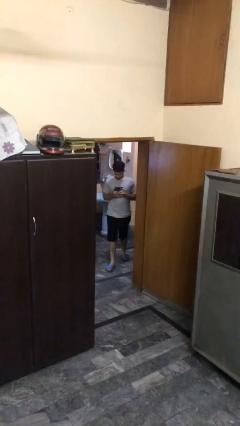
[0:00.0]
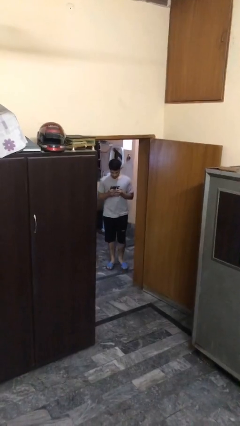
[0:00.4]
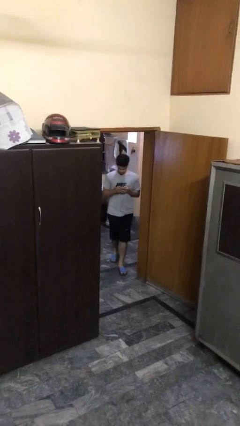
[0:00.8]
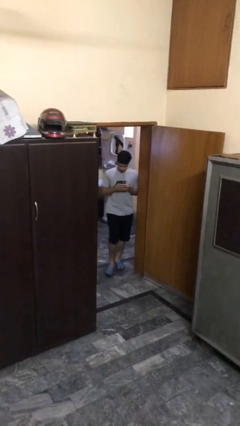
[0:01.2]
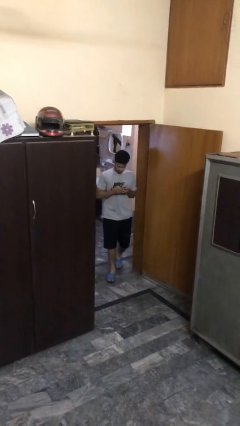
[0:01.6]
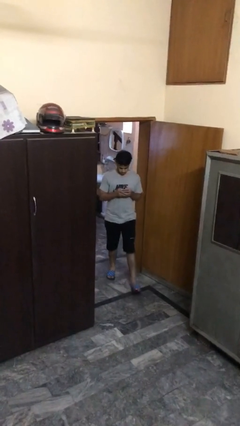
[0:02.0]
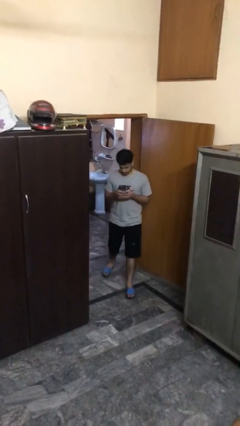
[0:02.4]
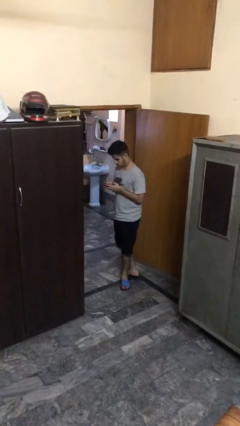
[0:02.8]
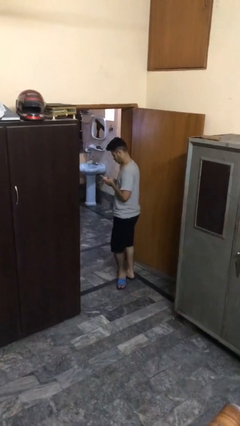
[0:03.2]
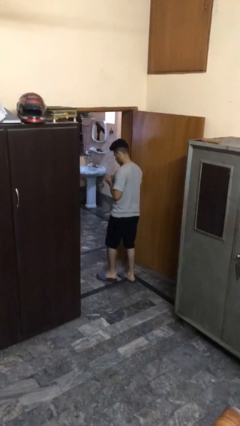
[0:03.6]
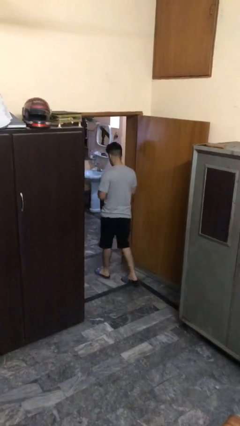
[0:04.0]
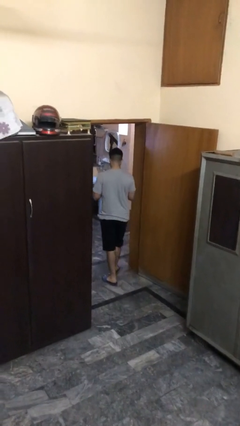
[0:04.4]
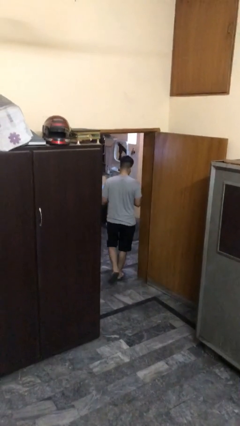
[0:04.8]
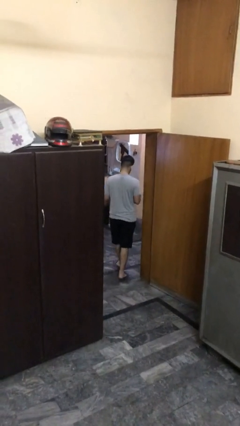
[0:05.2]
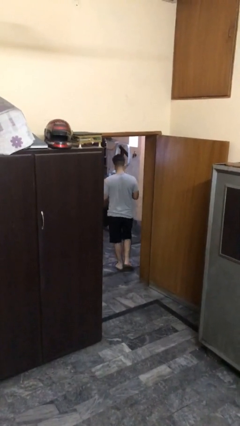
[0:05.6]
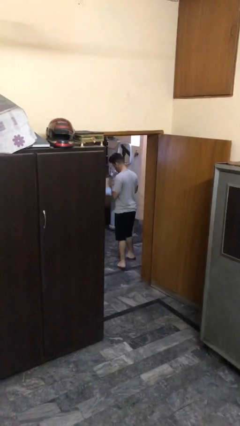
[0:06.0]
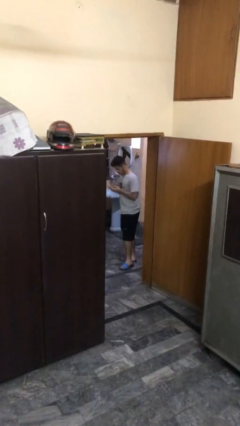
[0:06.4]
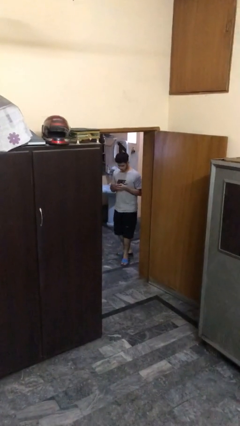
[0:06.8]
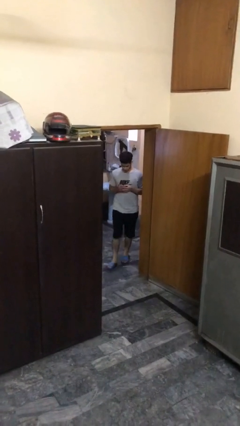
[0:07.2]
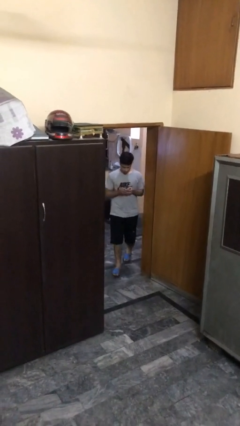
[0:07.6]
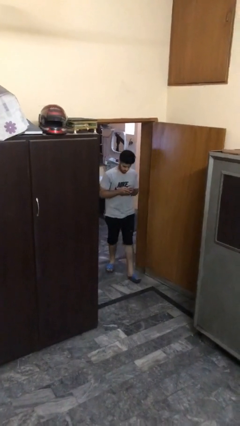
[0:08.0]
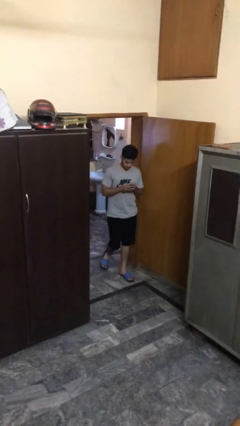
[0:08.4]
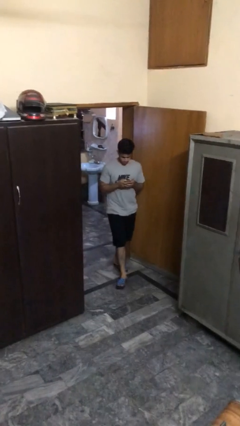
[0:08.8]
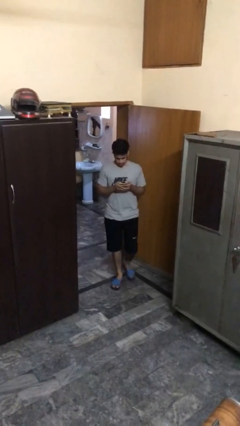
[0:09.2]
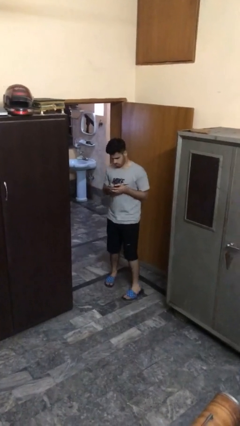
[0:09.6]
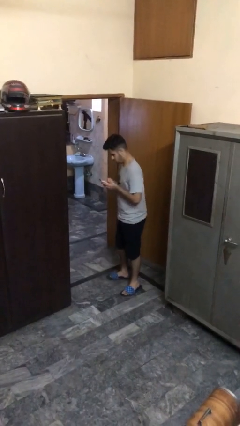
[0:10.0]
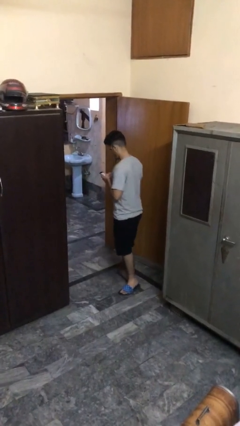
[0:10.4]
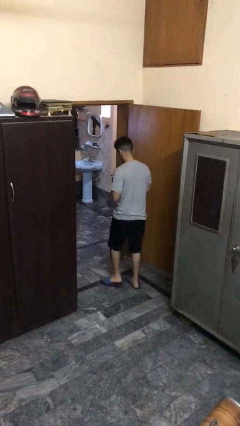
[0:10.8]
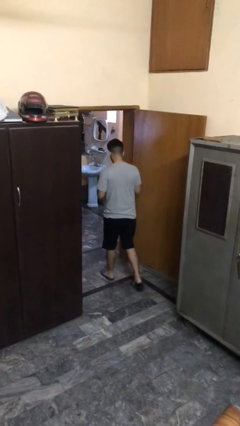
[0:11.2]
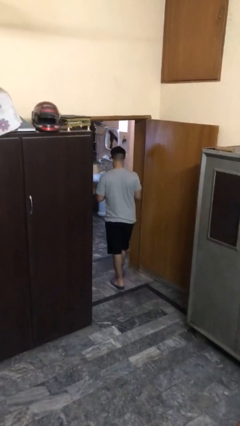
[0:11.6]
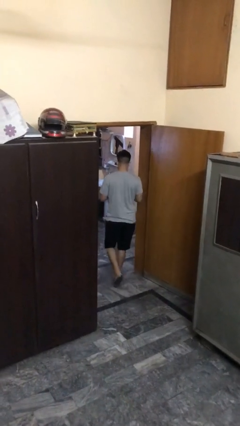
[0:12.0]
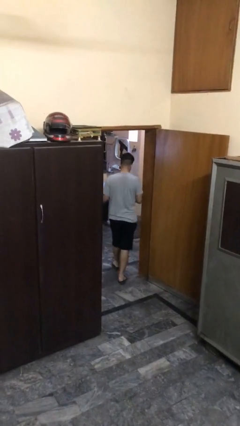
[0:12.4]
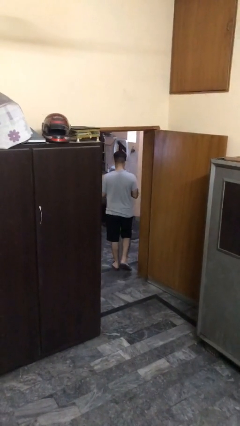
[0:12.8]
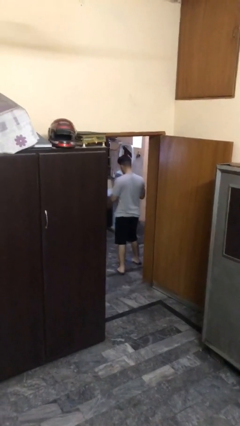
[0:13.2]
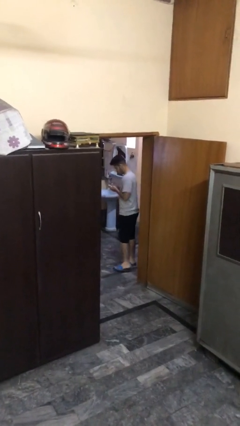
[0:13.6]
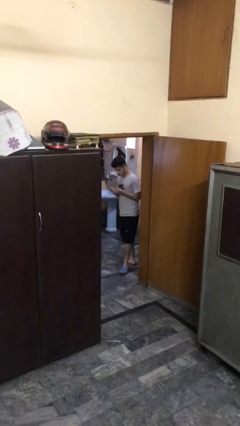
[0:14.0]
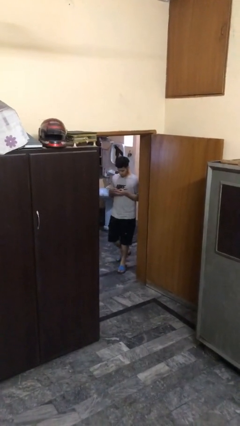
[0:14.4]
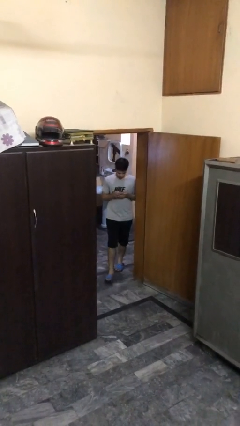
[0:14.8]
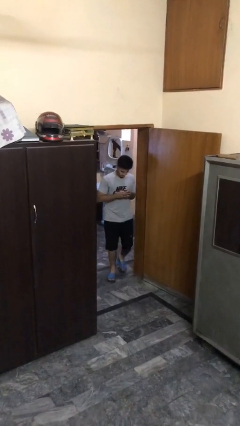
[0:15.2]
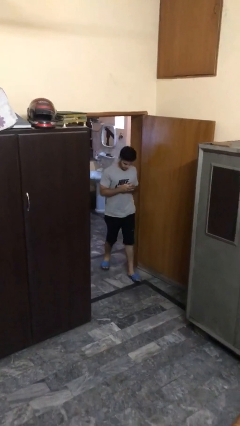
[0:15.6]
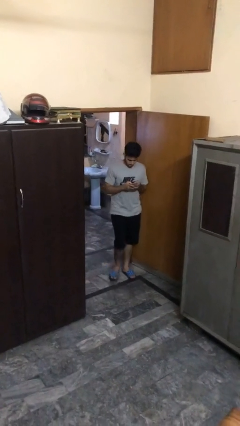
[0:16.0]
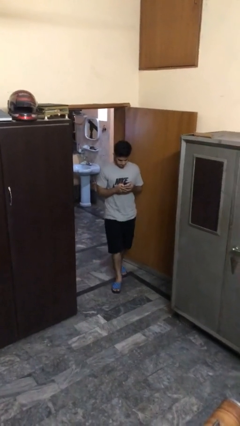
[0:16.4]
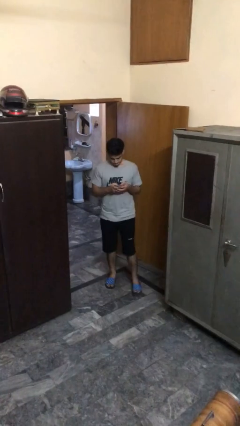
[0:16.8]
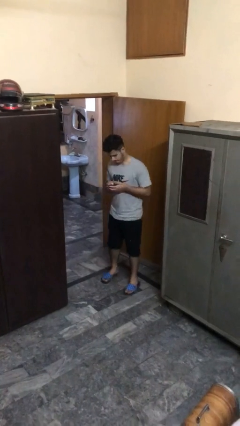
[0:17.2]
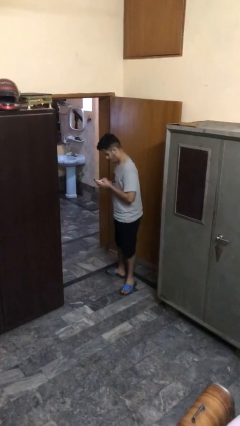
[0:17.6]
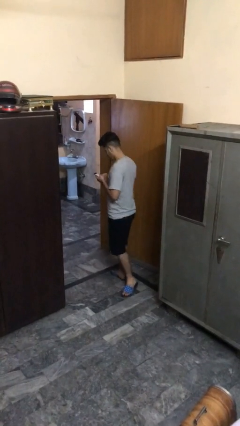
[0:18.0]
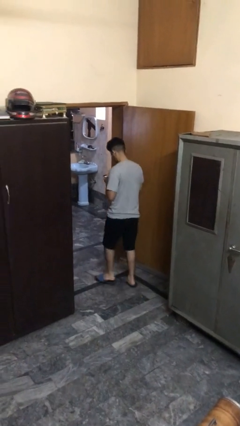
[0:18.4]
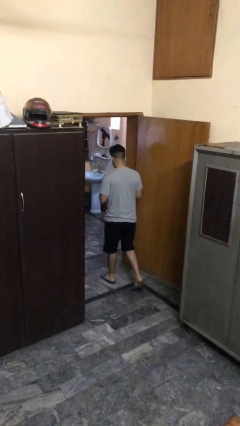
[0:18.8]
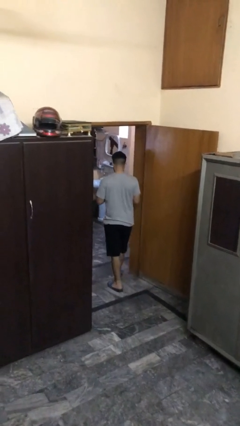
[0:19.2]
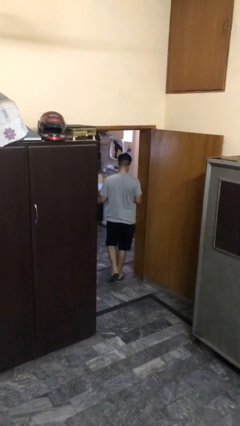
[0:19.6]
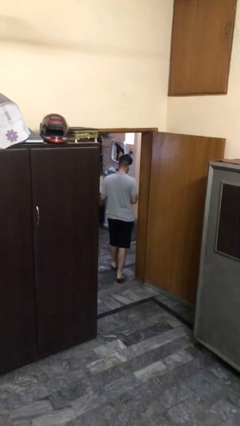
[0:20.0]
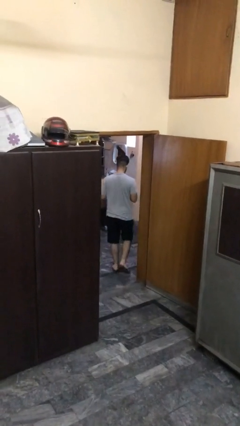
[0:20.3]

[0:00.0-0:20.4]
person texts on phone

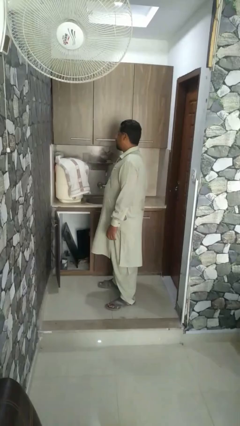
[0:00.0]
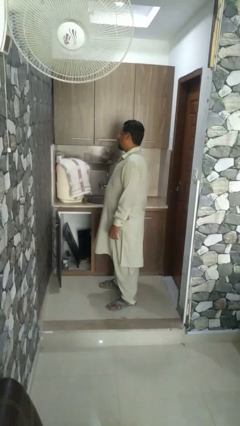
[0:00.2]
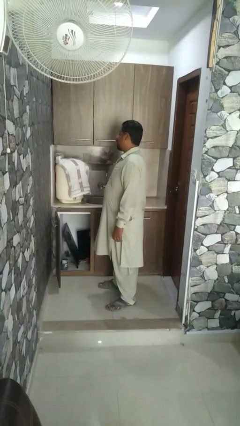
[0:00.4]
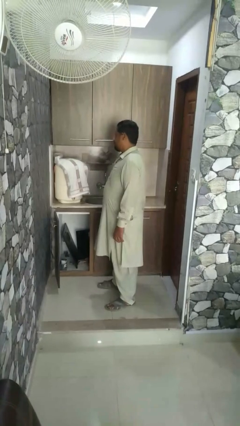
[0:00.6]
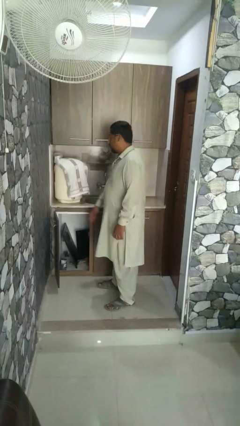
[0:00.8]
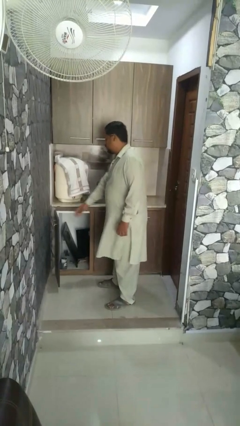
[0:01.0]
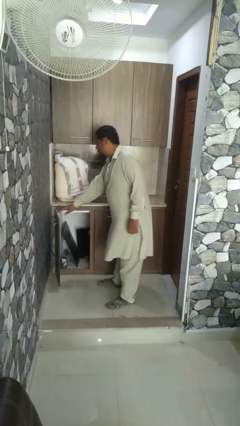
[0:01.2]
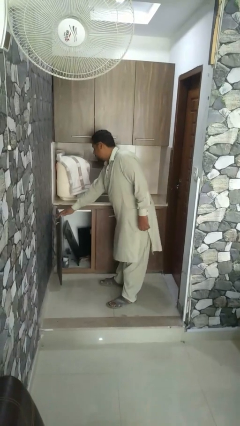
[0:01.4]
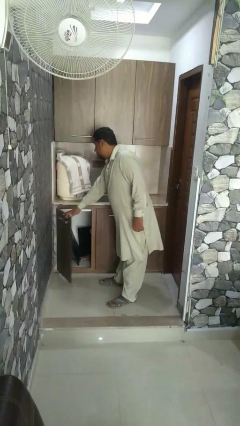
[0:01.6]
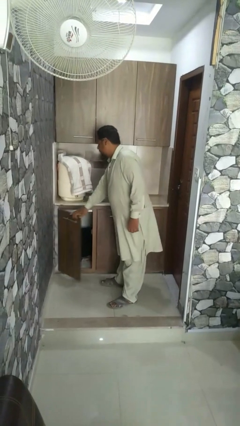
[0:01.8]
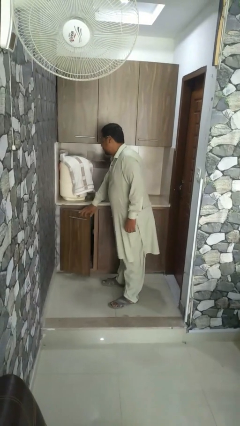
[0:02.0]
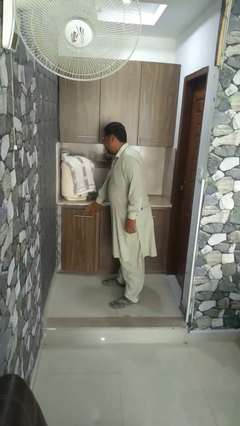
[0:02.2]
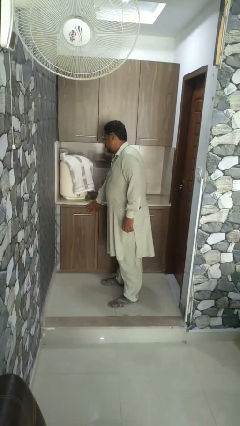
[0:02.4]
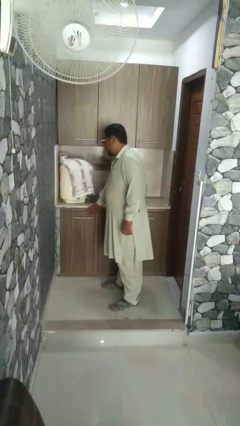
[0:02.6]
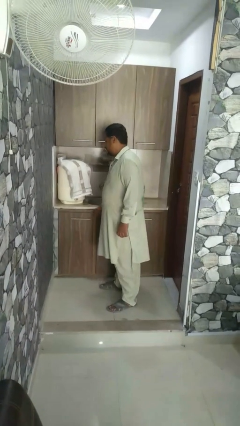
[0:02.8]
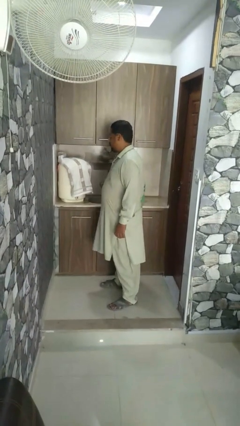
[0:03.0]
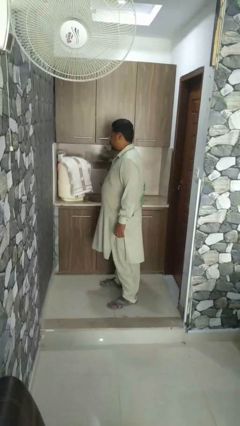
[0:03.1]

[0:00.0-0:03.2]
person closes refrigerator

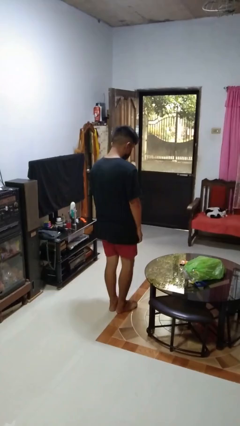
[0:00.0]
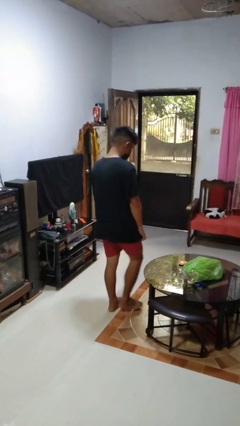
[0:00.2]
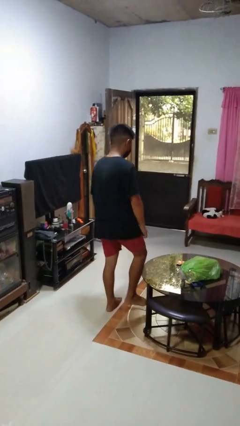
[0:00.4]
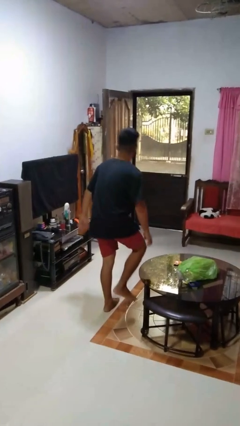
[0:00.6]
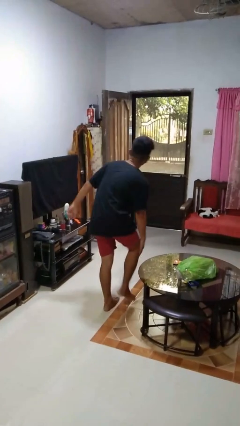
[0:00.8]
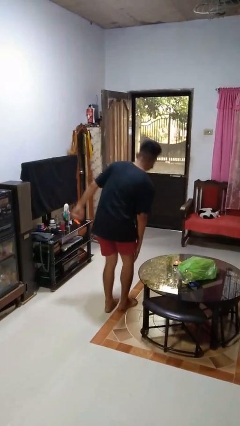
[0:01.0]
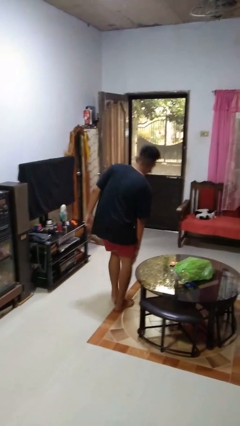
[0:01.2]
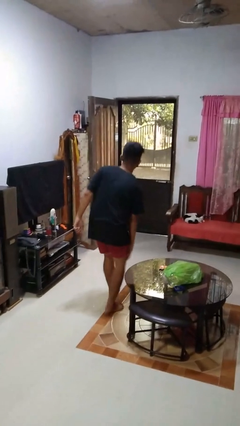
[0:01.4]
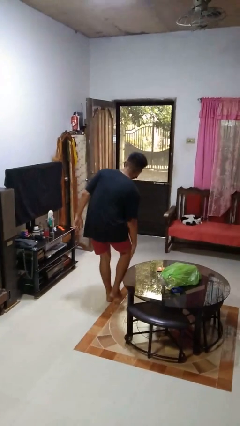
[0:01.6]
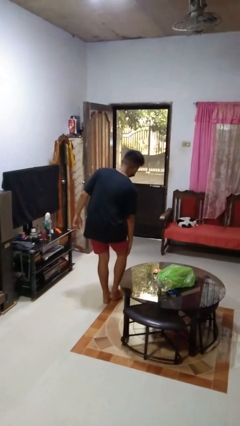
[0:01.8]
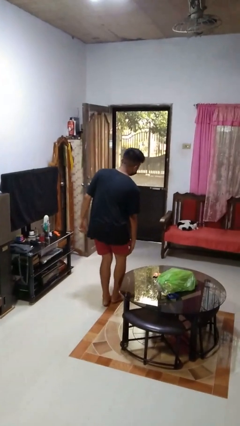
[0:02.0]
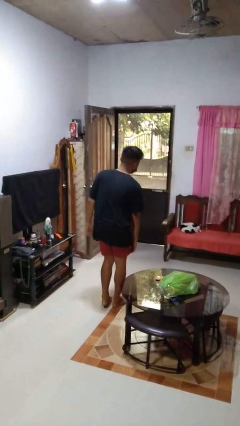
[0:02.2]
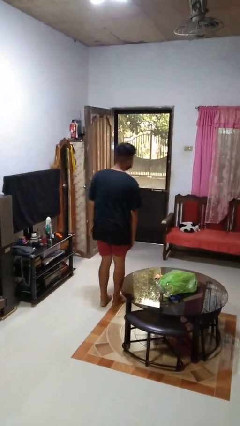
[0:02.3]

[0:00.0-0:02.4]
person bumps into table

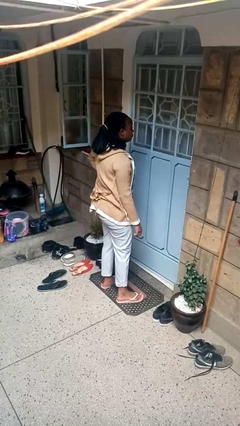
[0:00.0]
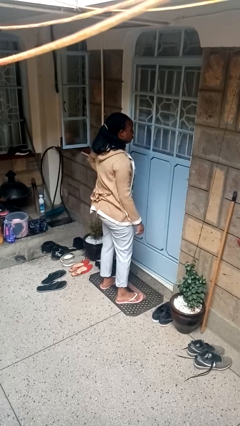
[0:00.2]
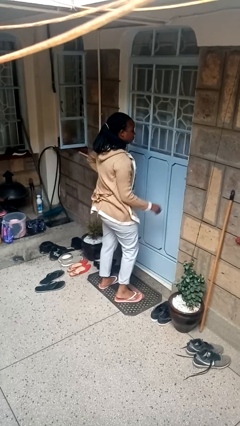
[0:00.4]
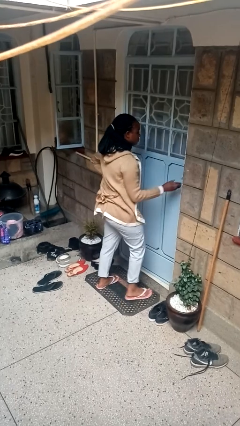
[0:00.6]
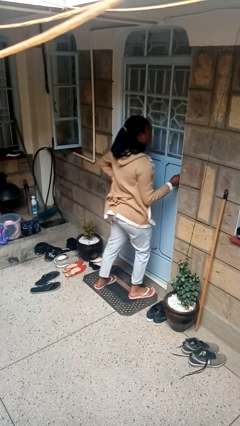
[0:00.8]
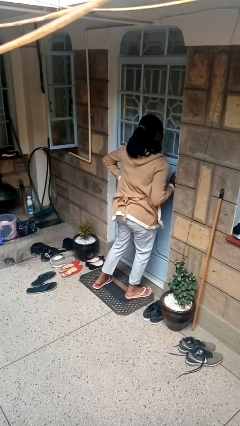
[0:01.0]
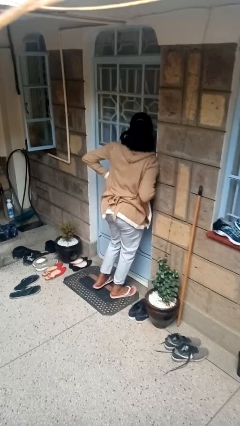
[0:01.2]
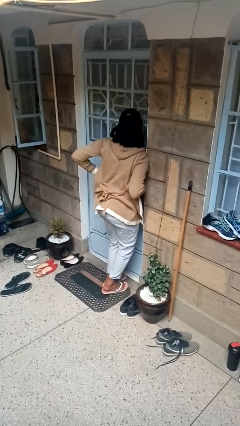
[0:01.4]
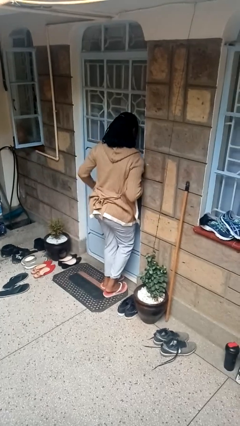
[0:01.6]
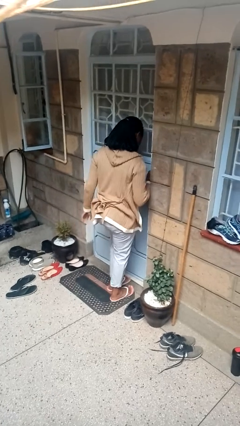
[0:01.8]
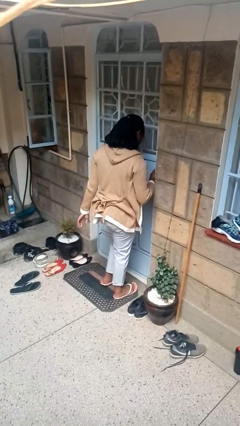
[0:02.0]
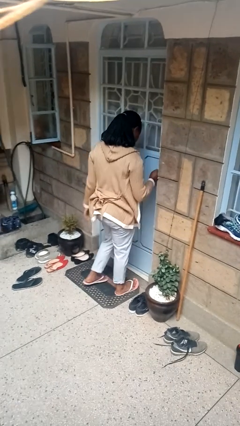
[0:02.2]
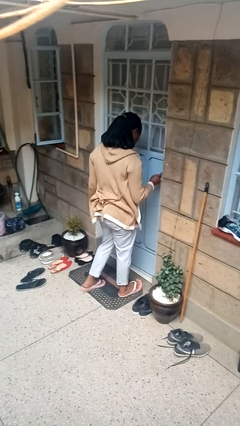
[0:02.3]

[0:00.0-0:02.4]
person bumps into wall
